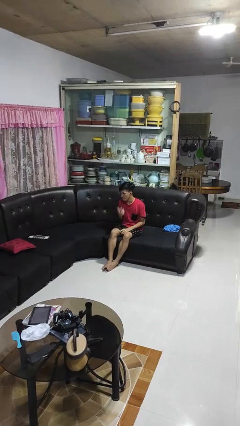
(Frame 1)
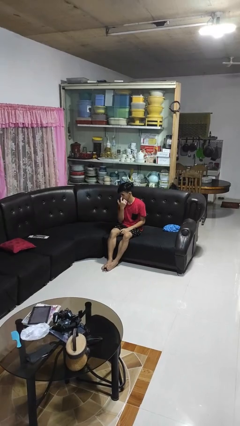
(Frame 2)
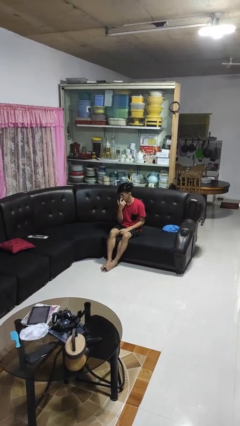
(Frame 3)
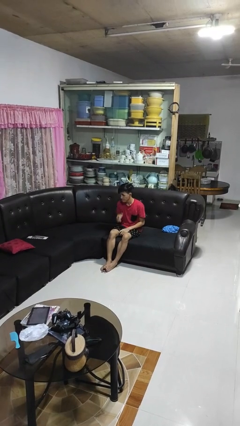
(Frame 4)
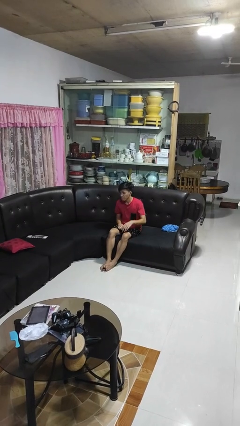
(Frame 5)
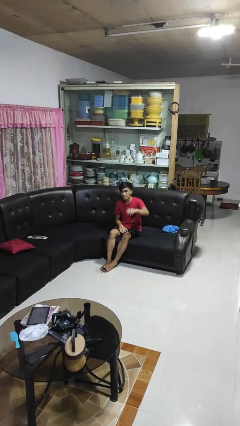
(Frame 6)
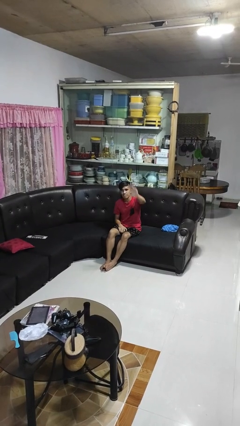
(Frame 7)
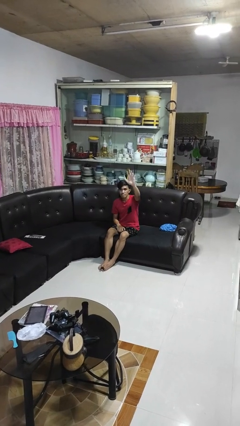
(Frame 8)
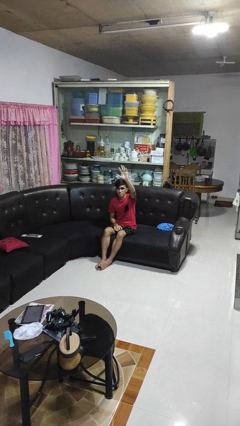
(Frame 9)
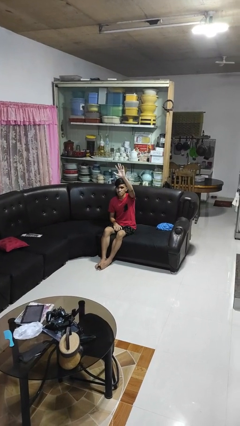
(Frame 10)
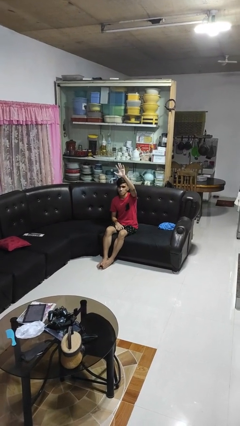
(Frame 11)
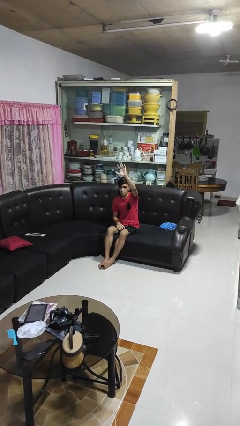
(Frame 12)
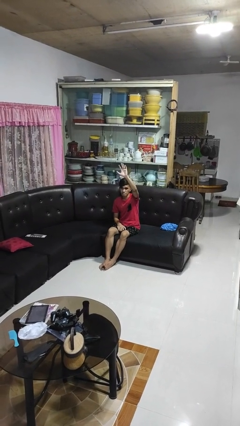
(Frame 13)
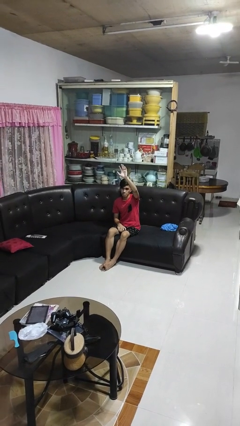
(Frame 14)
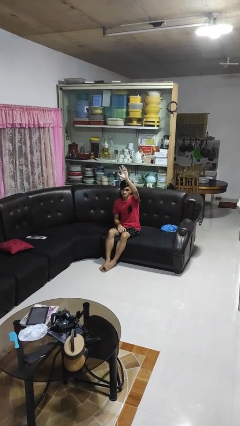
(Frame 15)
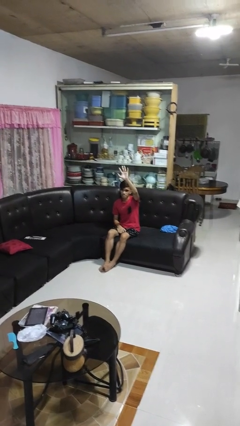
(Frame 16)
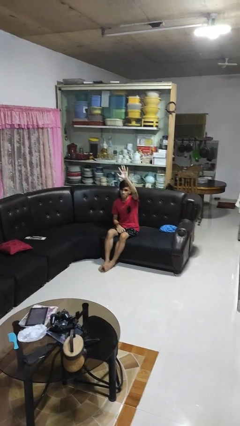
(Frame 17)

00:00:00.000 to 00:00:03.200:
person gestures raise hand

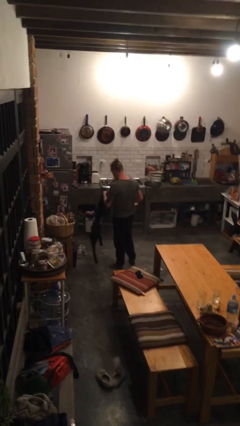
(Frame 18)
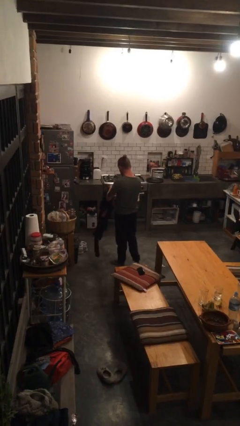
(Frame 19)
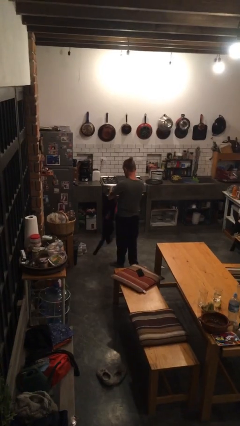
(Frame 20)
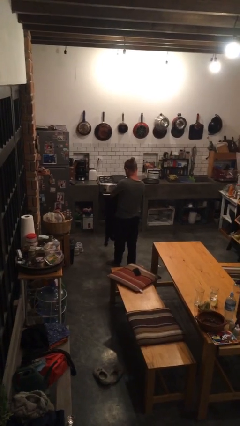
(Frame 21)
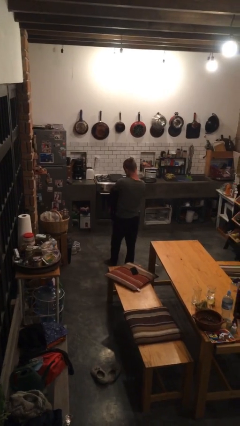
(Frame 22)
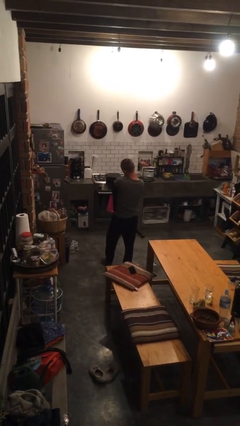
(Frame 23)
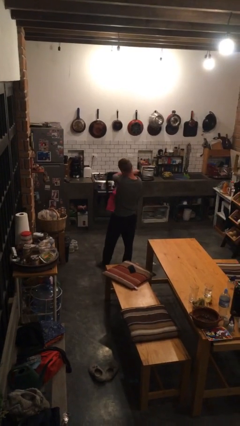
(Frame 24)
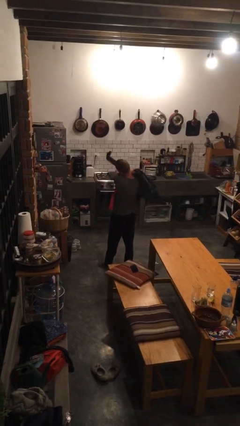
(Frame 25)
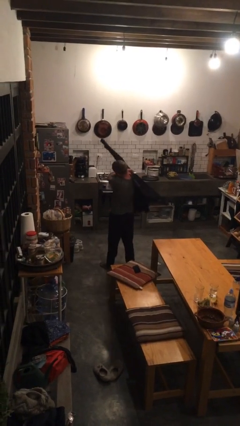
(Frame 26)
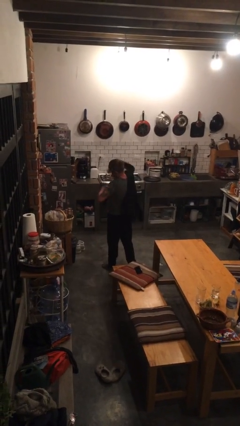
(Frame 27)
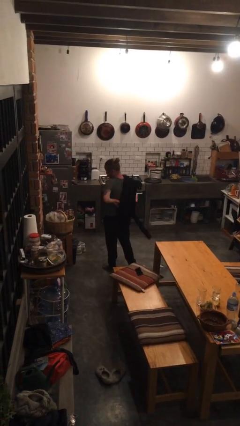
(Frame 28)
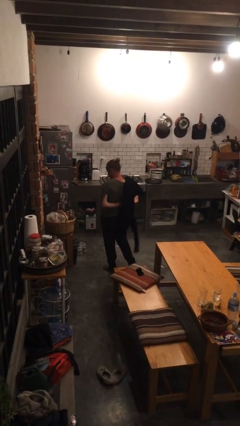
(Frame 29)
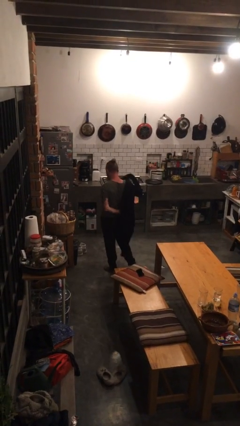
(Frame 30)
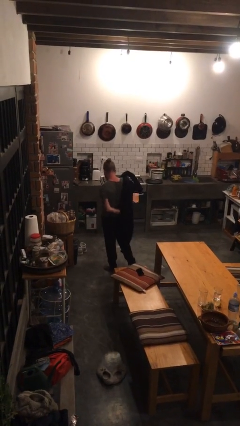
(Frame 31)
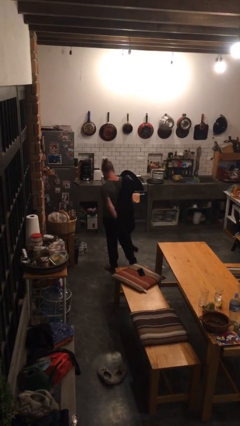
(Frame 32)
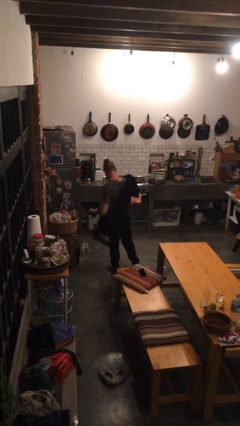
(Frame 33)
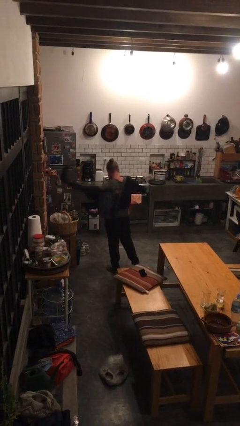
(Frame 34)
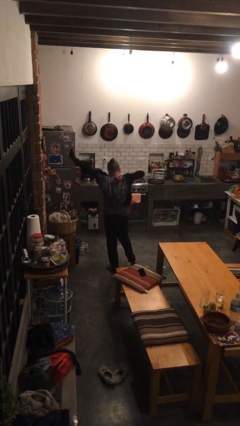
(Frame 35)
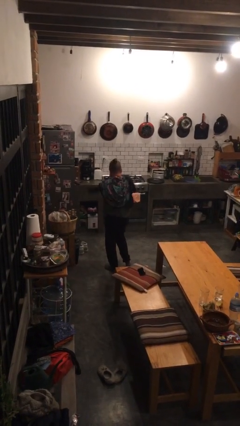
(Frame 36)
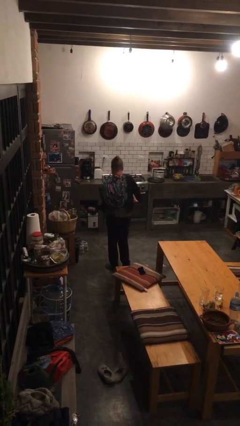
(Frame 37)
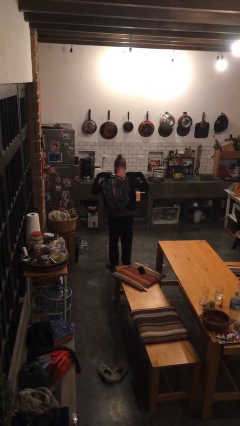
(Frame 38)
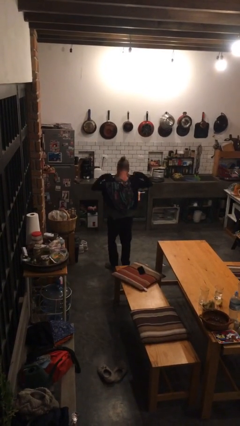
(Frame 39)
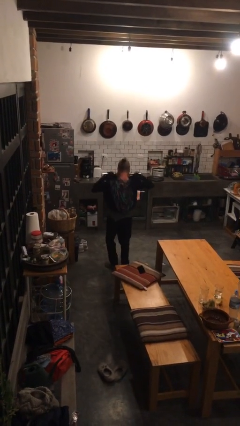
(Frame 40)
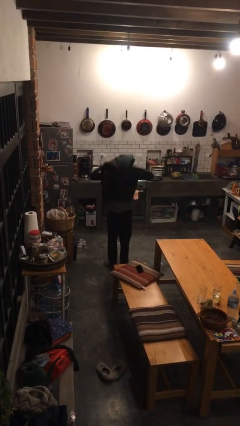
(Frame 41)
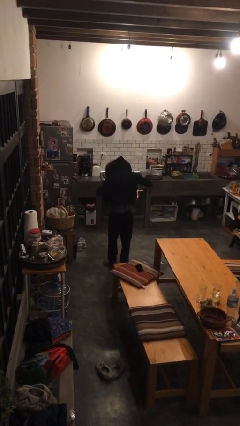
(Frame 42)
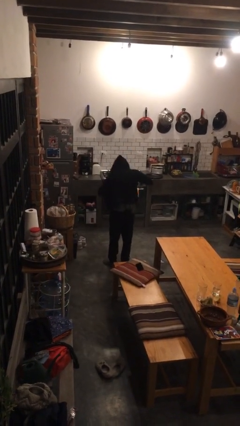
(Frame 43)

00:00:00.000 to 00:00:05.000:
person puts on hoodie

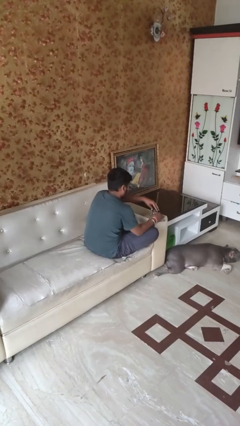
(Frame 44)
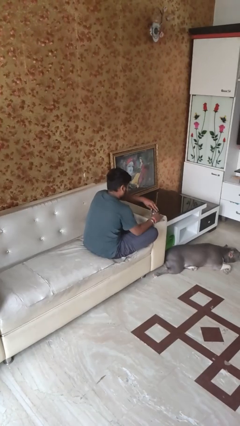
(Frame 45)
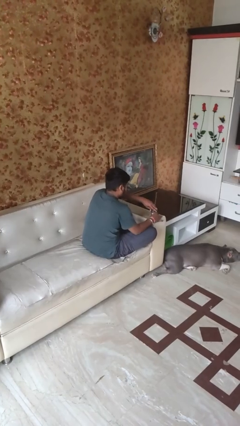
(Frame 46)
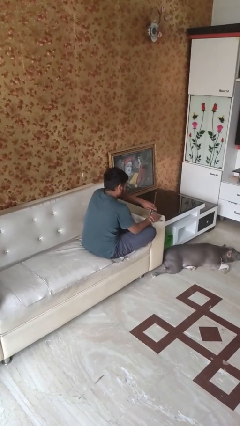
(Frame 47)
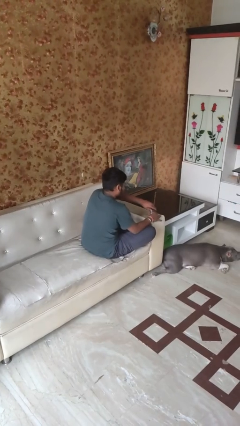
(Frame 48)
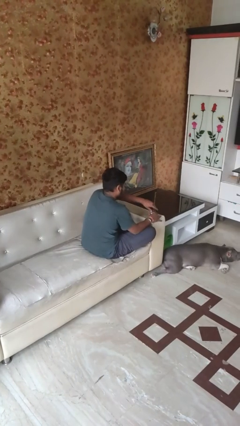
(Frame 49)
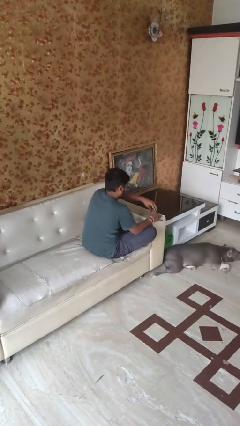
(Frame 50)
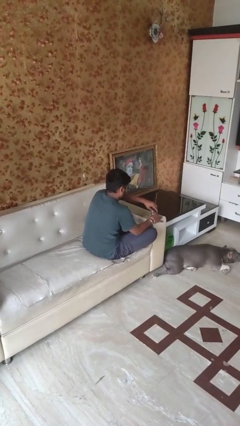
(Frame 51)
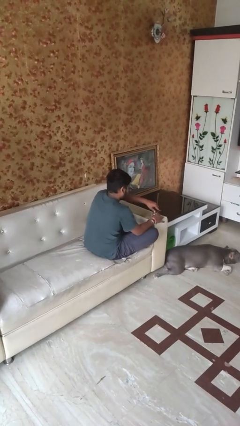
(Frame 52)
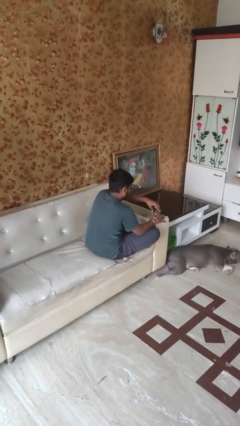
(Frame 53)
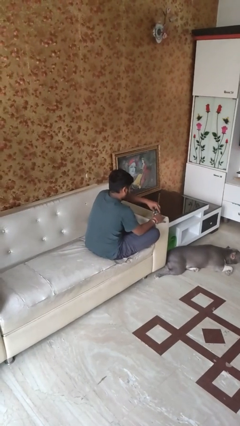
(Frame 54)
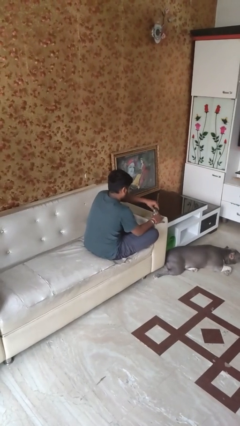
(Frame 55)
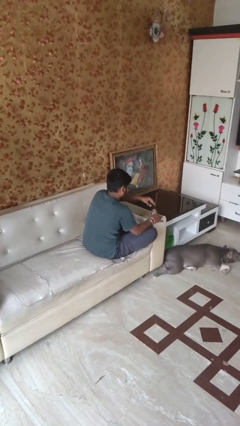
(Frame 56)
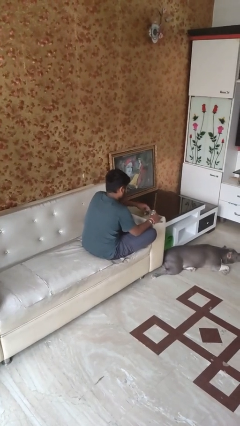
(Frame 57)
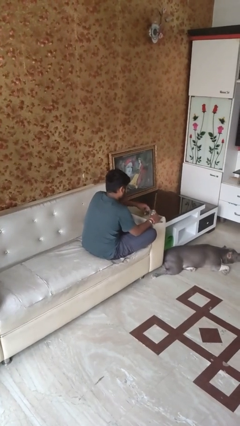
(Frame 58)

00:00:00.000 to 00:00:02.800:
person opens jar

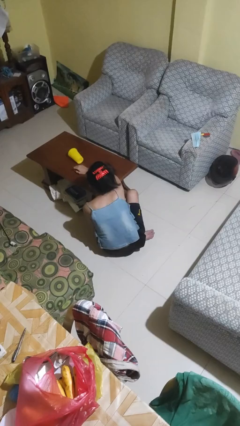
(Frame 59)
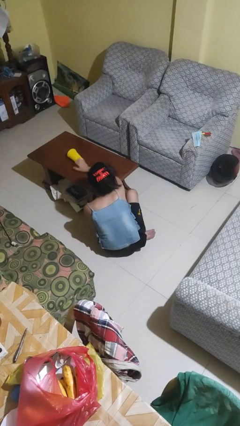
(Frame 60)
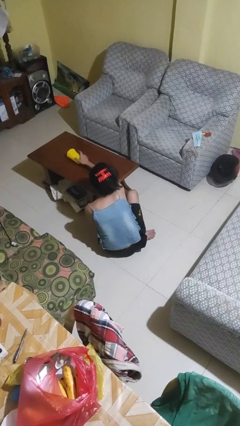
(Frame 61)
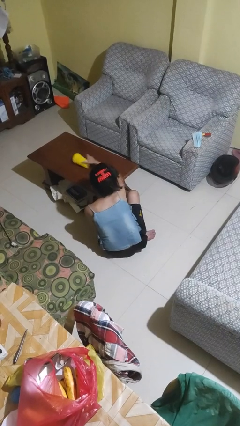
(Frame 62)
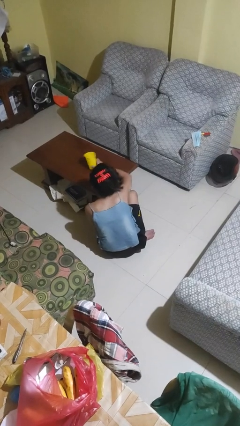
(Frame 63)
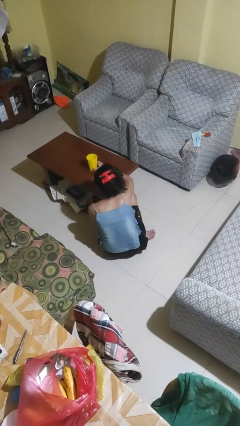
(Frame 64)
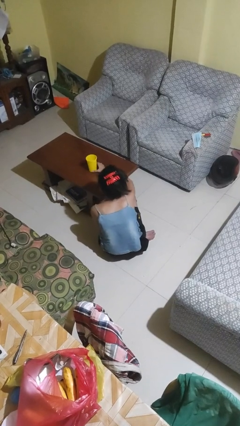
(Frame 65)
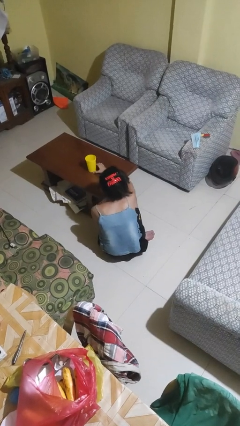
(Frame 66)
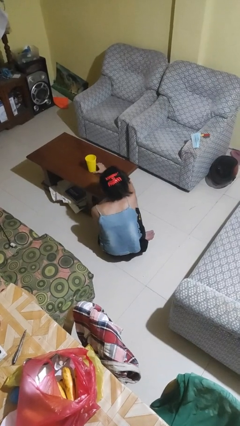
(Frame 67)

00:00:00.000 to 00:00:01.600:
person sets upright glass

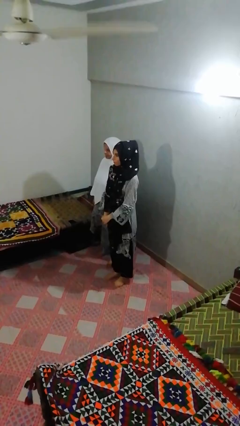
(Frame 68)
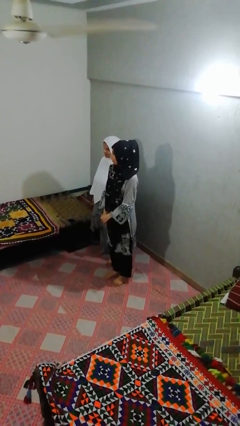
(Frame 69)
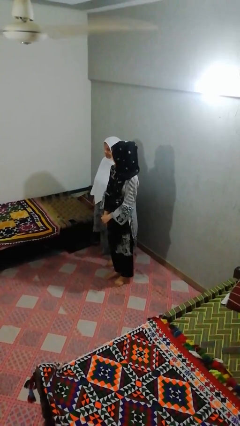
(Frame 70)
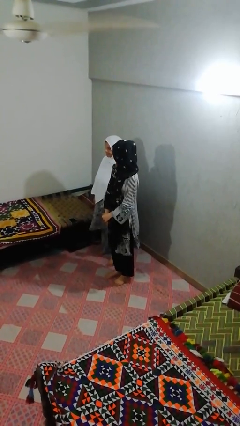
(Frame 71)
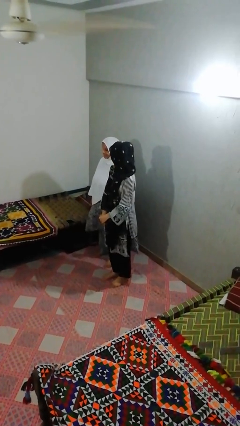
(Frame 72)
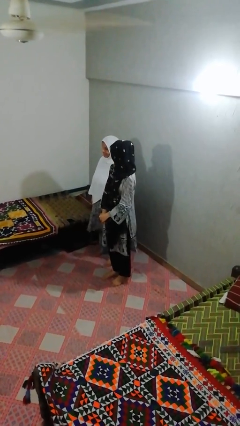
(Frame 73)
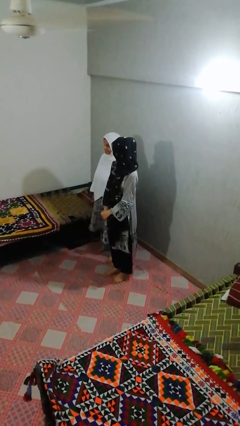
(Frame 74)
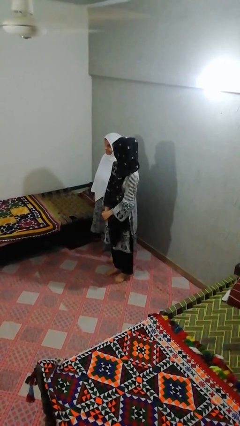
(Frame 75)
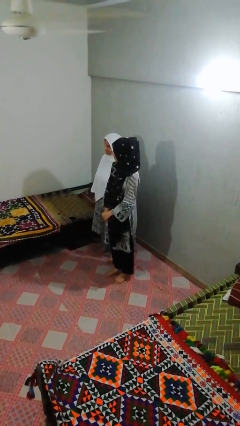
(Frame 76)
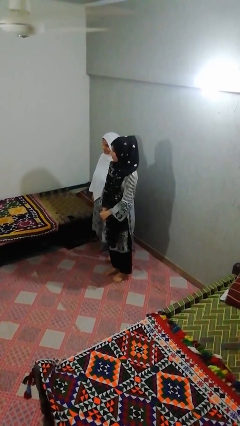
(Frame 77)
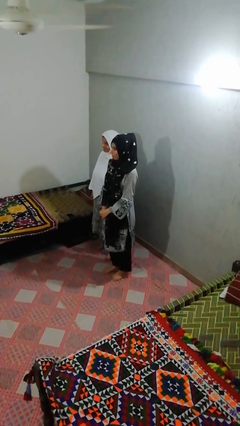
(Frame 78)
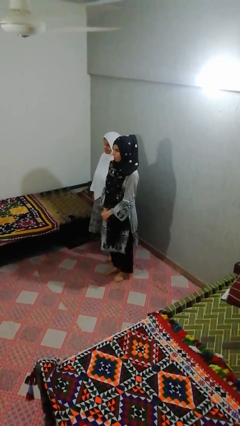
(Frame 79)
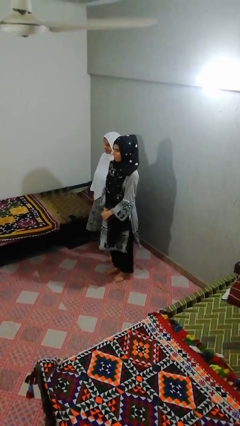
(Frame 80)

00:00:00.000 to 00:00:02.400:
person looks over shoulder

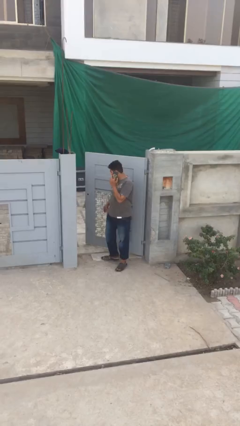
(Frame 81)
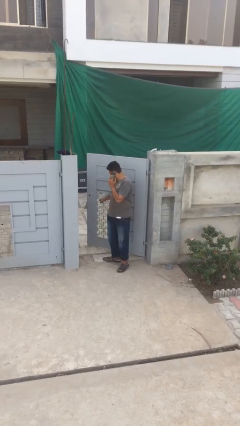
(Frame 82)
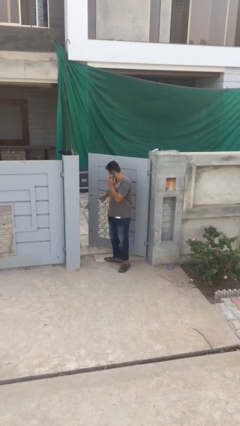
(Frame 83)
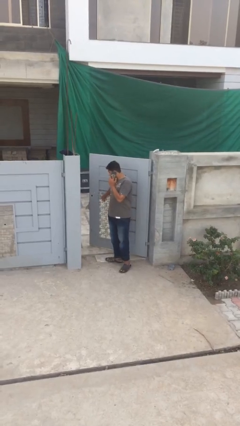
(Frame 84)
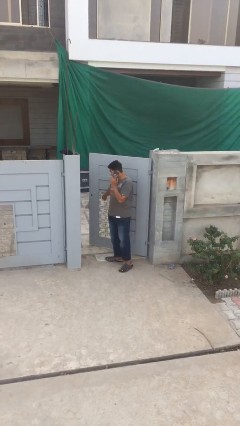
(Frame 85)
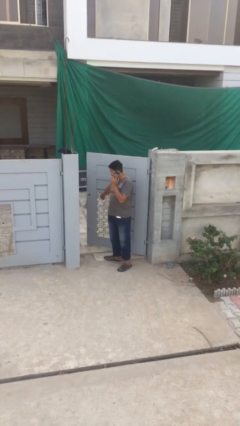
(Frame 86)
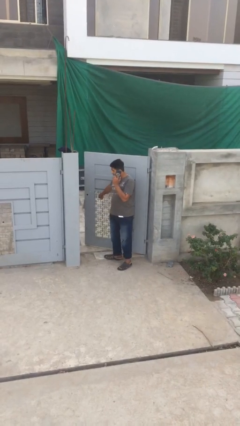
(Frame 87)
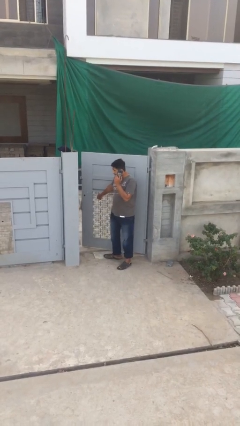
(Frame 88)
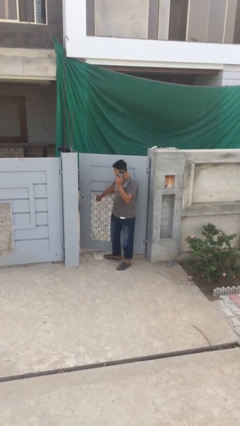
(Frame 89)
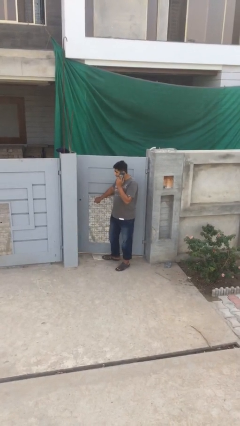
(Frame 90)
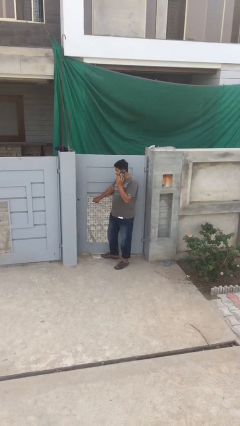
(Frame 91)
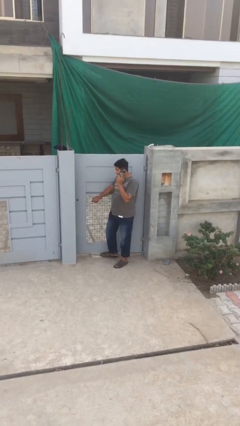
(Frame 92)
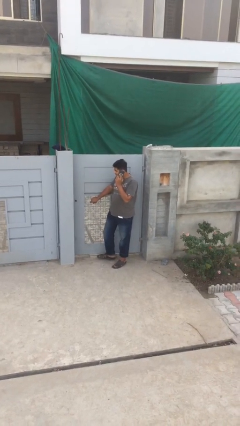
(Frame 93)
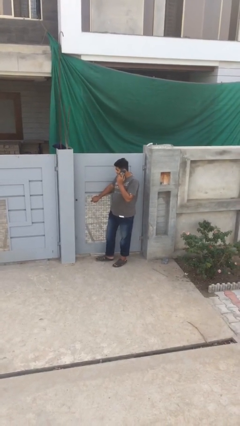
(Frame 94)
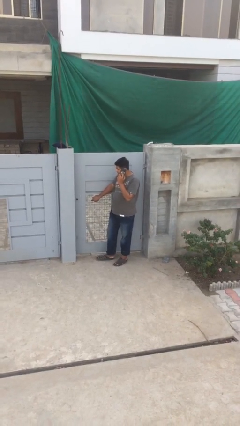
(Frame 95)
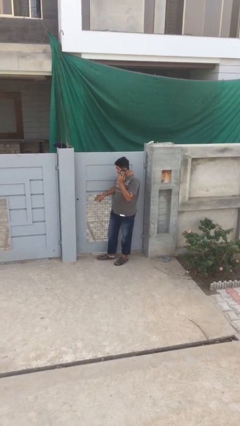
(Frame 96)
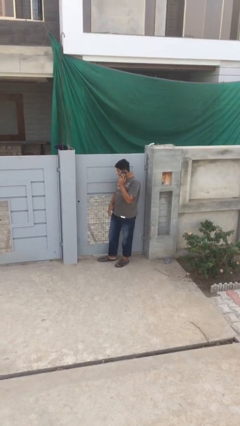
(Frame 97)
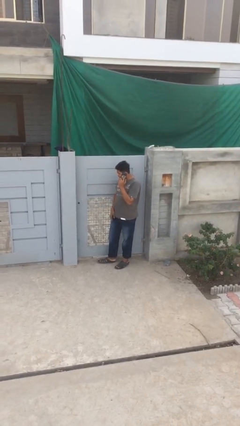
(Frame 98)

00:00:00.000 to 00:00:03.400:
person closes facility door
